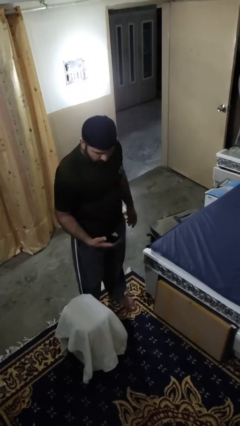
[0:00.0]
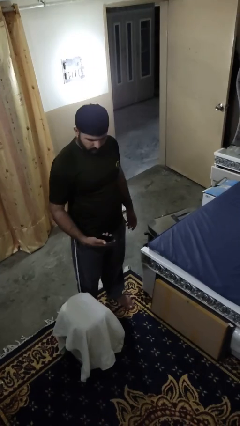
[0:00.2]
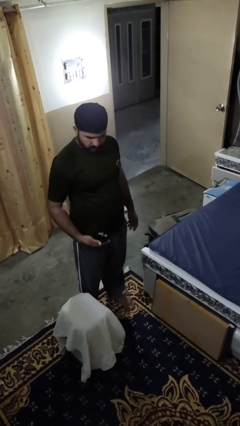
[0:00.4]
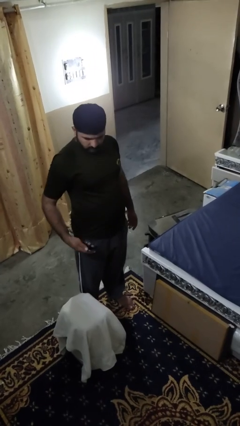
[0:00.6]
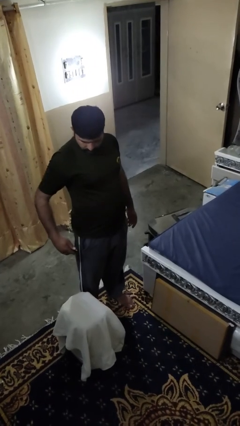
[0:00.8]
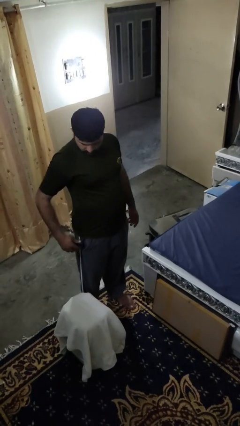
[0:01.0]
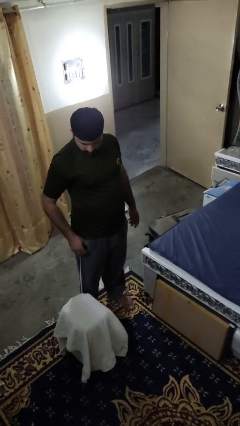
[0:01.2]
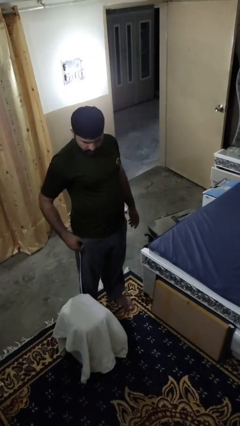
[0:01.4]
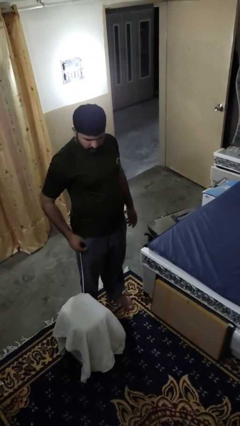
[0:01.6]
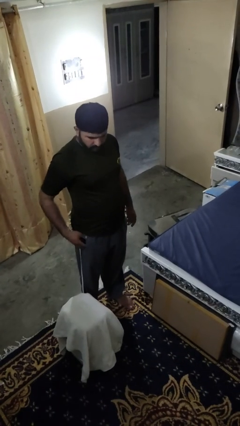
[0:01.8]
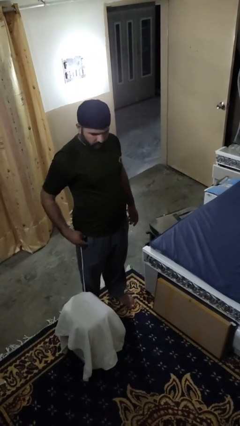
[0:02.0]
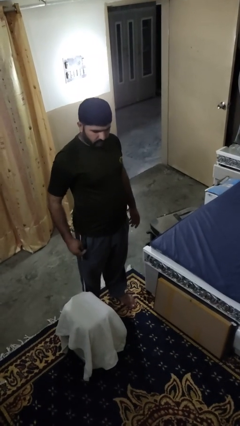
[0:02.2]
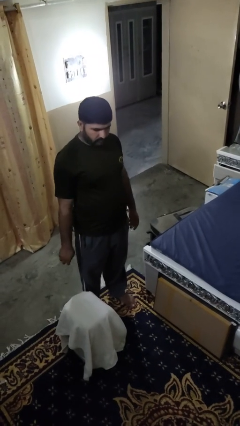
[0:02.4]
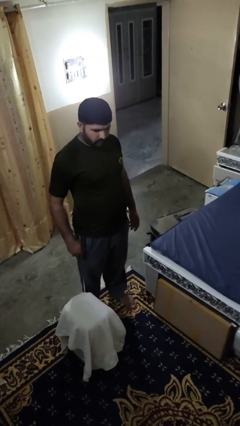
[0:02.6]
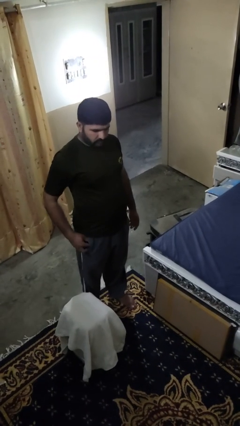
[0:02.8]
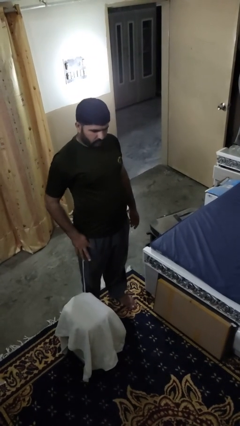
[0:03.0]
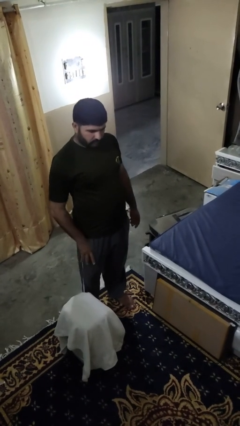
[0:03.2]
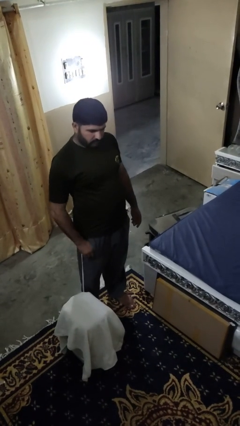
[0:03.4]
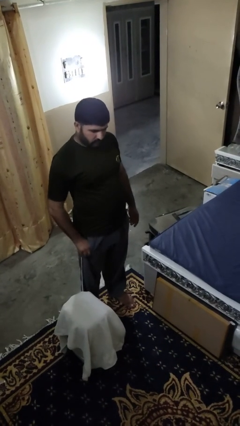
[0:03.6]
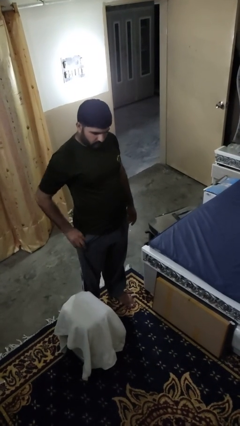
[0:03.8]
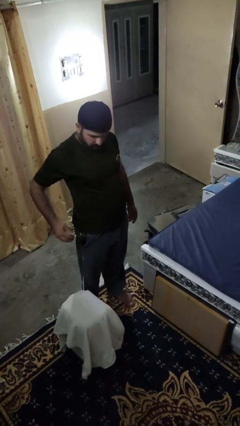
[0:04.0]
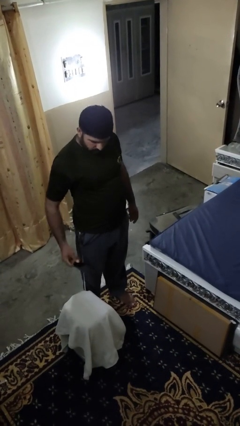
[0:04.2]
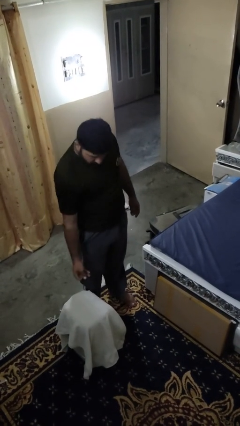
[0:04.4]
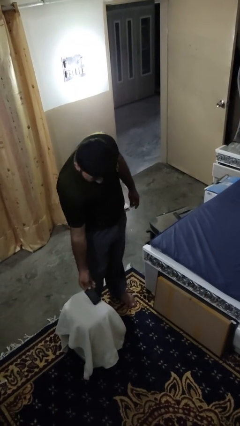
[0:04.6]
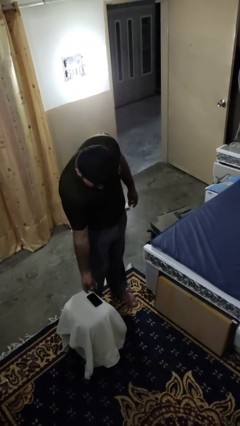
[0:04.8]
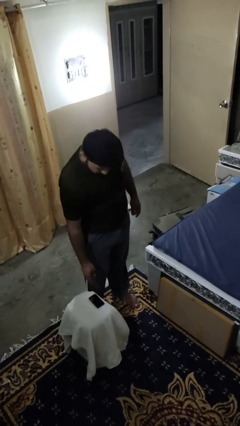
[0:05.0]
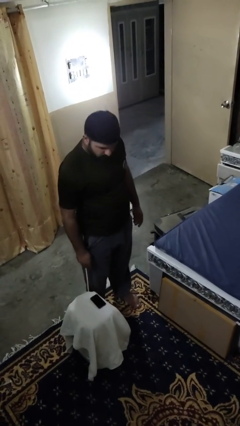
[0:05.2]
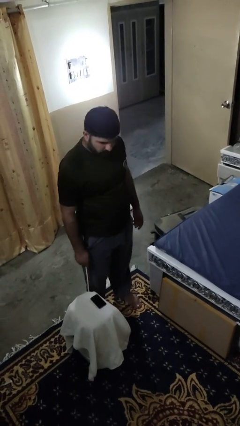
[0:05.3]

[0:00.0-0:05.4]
person puts phone into pocket

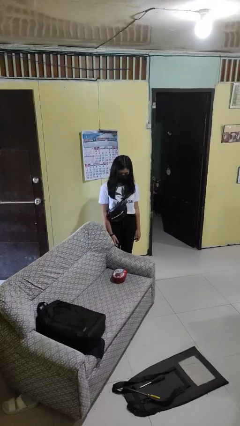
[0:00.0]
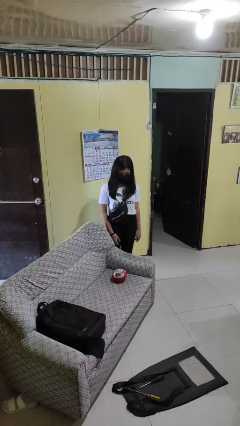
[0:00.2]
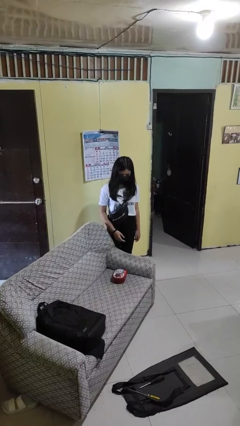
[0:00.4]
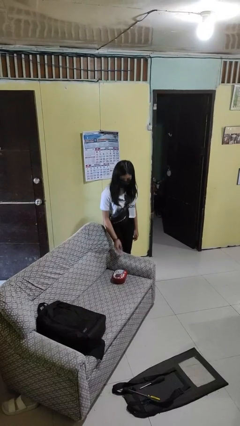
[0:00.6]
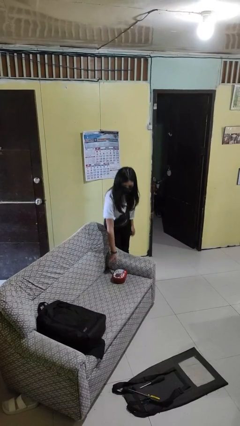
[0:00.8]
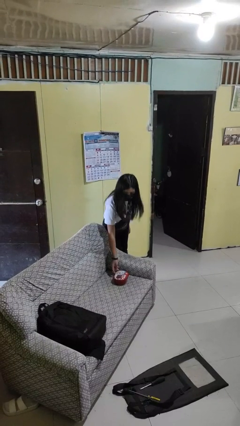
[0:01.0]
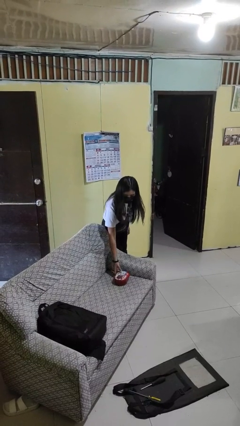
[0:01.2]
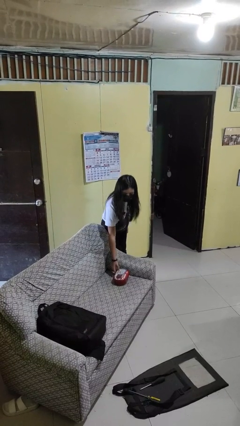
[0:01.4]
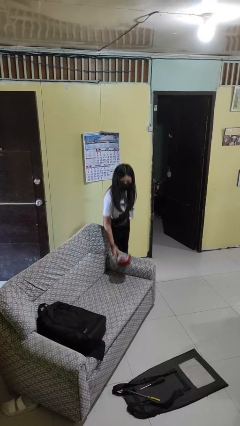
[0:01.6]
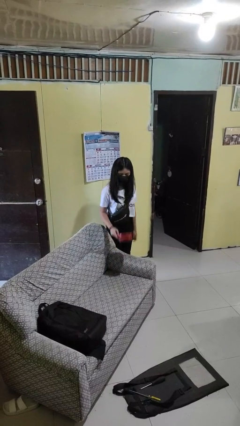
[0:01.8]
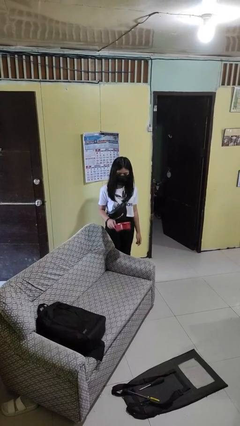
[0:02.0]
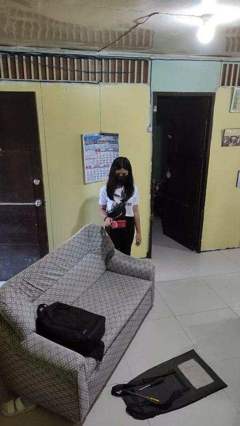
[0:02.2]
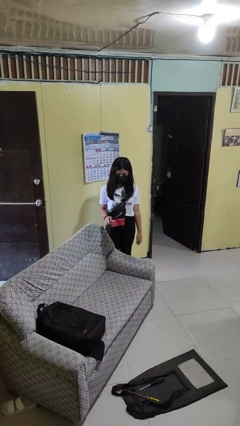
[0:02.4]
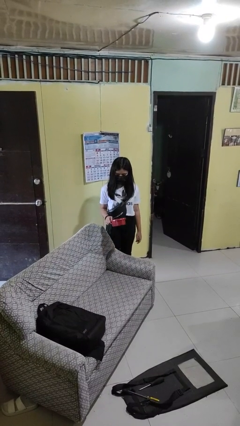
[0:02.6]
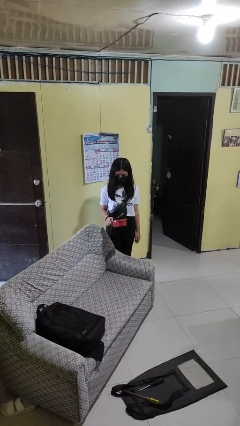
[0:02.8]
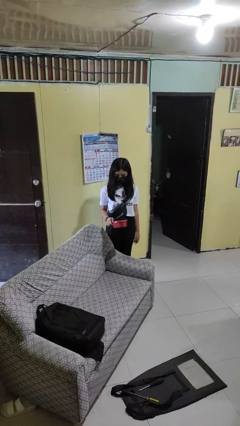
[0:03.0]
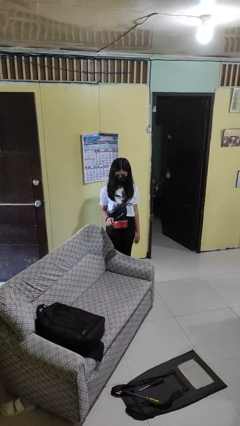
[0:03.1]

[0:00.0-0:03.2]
person picks up object from couch

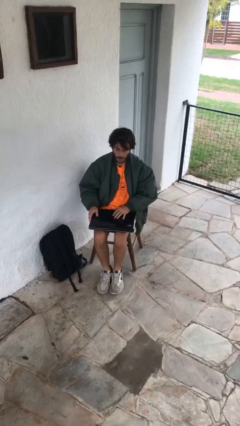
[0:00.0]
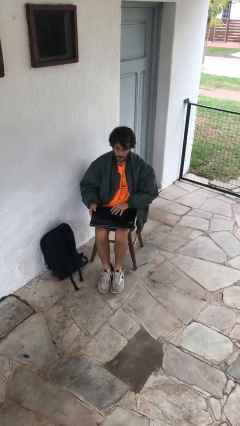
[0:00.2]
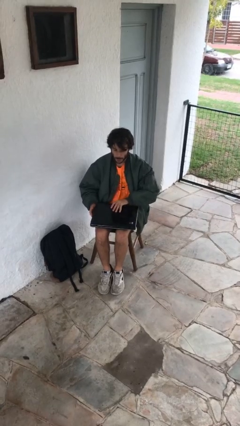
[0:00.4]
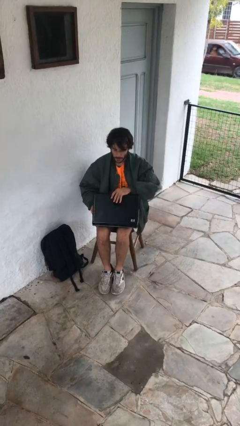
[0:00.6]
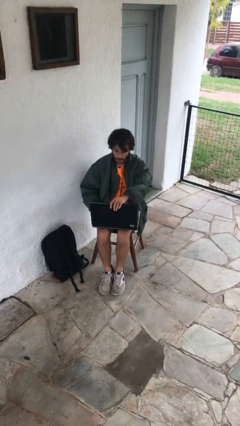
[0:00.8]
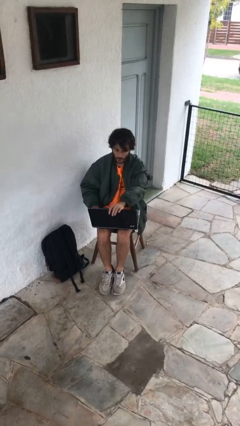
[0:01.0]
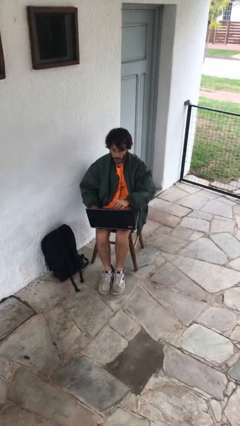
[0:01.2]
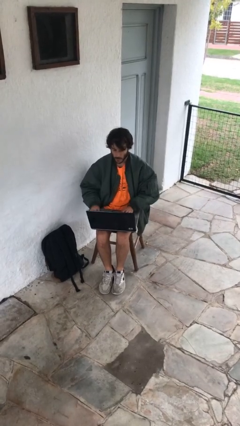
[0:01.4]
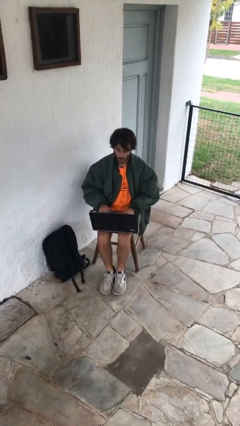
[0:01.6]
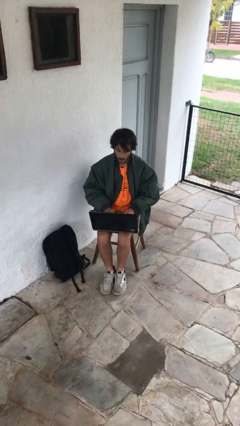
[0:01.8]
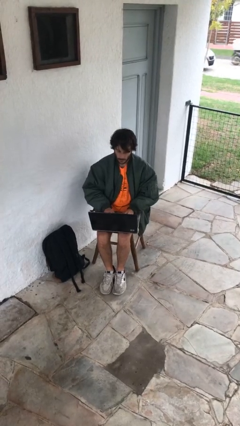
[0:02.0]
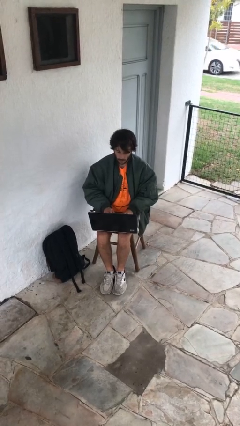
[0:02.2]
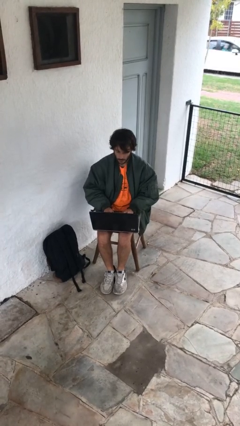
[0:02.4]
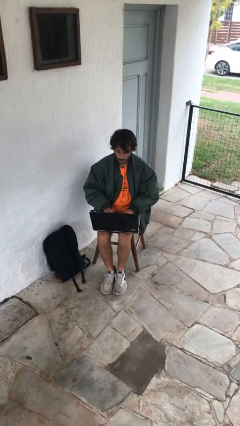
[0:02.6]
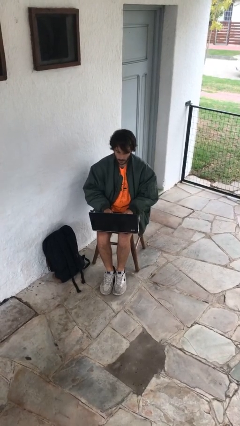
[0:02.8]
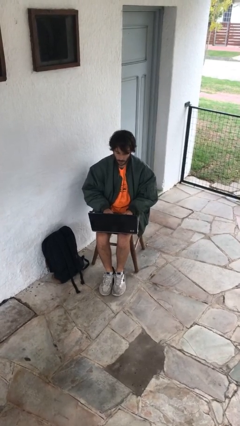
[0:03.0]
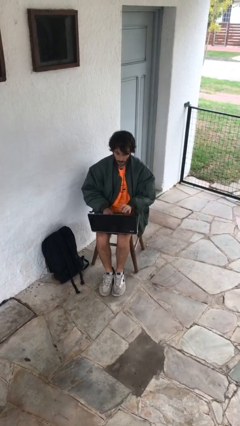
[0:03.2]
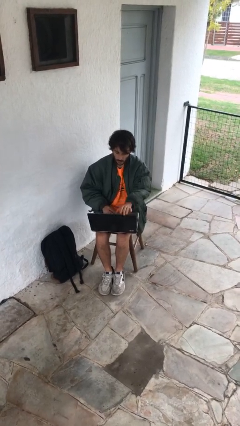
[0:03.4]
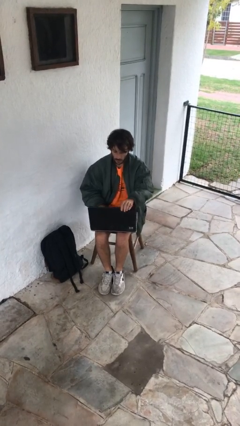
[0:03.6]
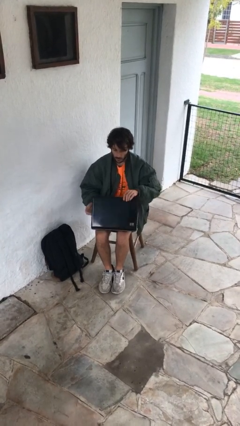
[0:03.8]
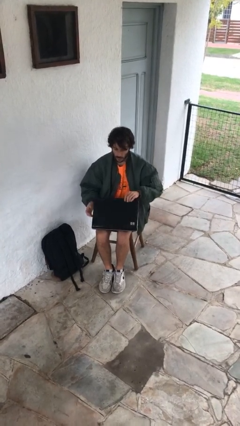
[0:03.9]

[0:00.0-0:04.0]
person interacts with laptop

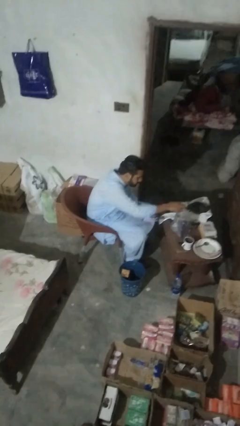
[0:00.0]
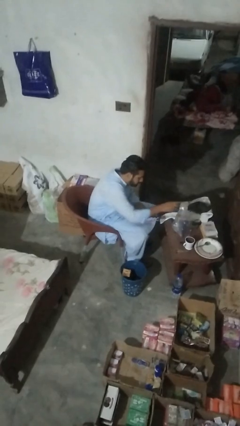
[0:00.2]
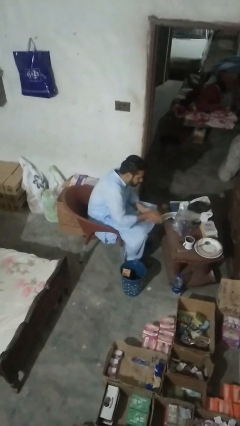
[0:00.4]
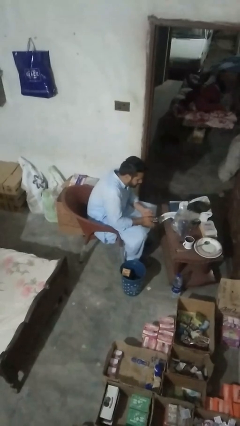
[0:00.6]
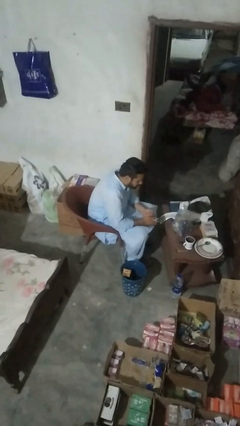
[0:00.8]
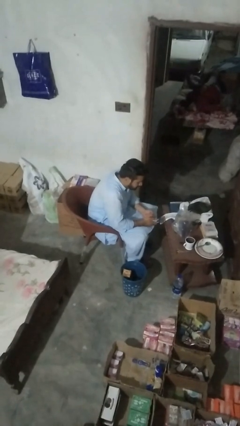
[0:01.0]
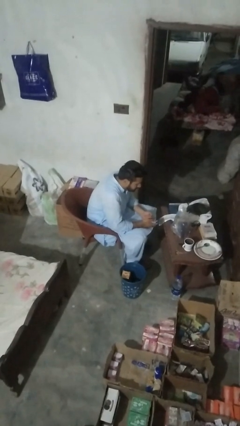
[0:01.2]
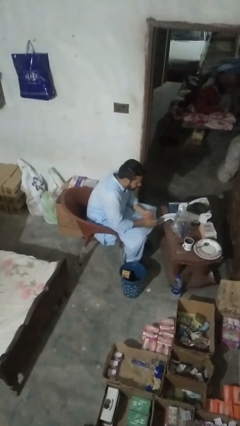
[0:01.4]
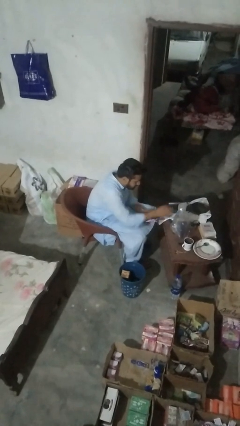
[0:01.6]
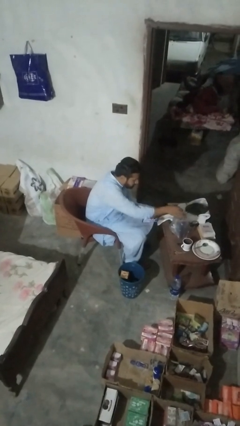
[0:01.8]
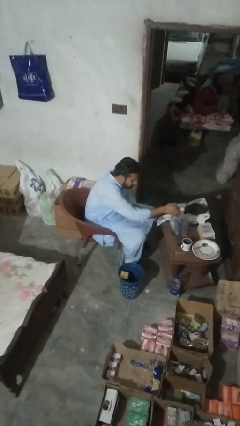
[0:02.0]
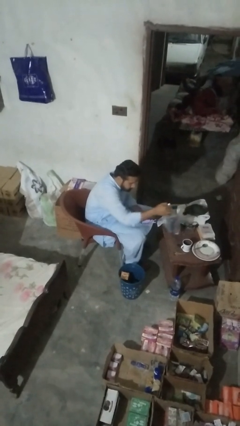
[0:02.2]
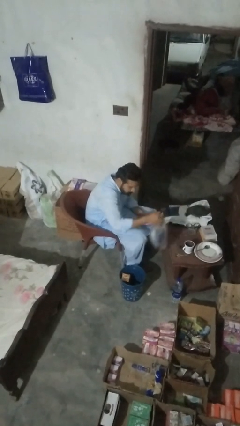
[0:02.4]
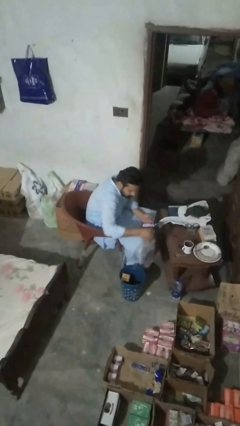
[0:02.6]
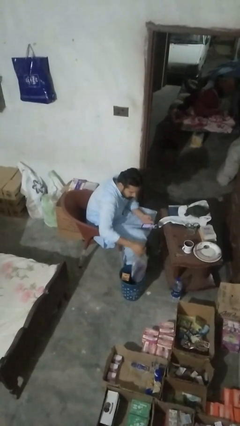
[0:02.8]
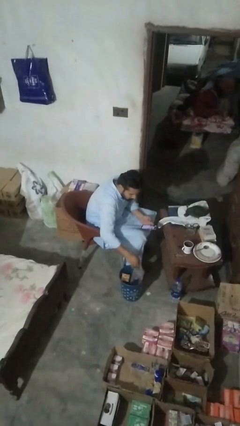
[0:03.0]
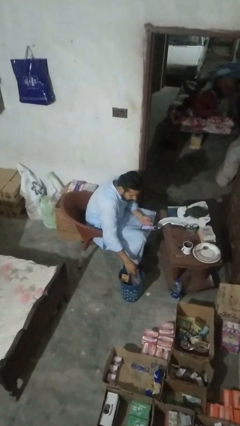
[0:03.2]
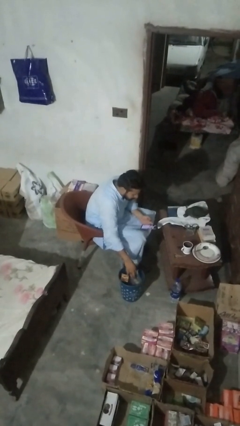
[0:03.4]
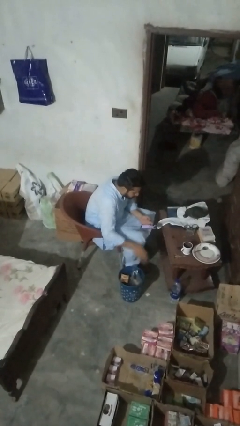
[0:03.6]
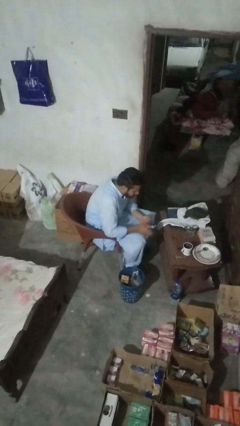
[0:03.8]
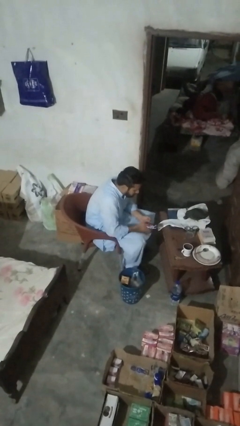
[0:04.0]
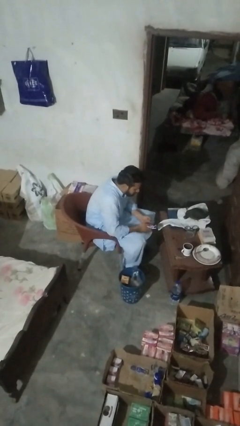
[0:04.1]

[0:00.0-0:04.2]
person removes trashbag from trashcan

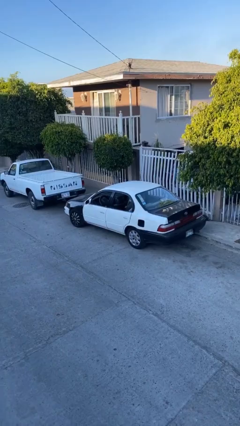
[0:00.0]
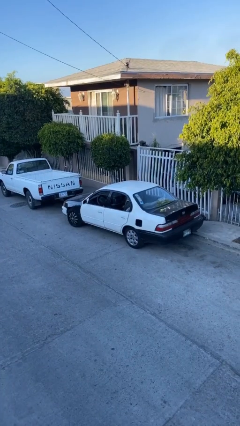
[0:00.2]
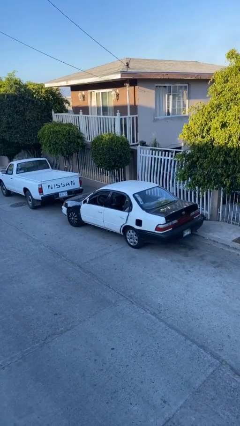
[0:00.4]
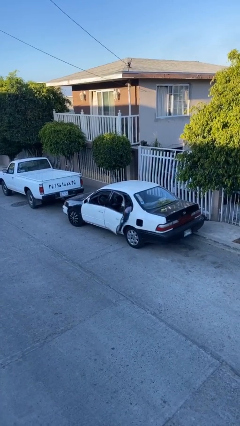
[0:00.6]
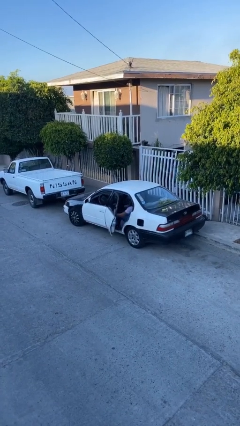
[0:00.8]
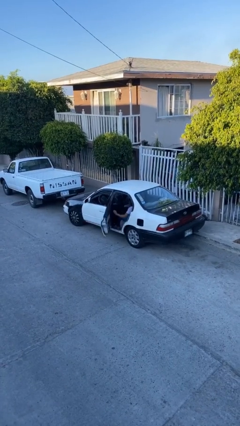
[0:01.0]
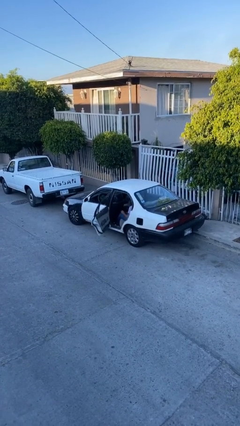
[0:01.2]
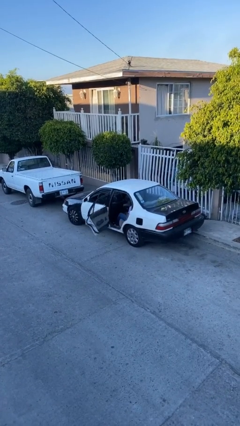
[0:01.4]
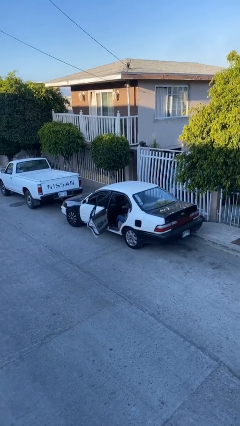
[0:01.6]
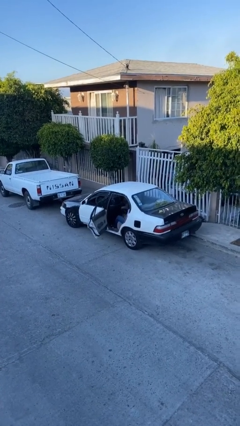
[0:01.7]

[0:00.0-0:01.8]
person opens car door
